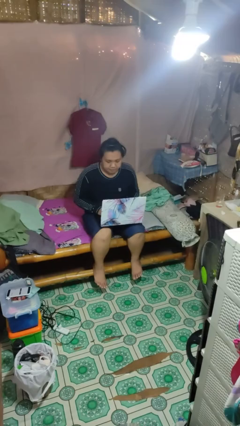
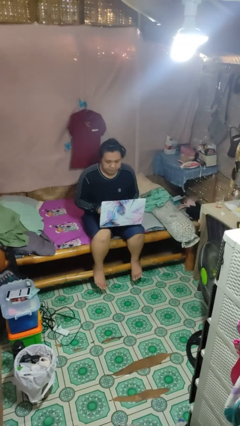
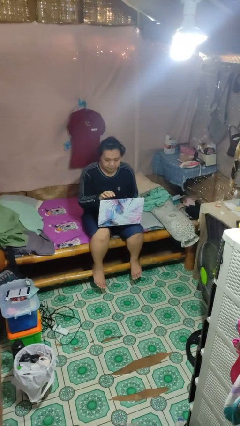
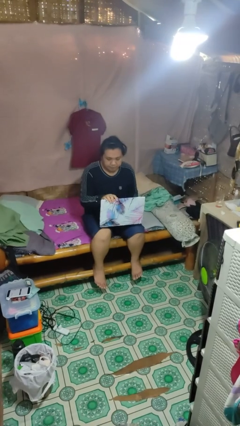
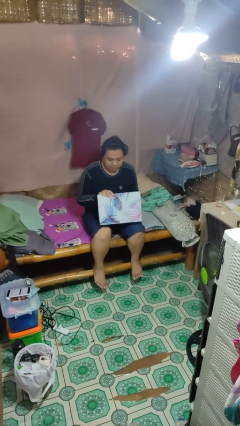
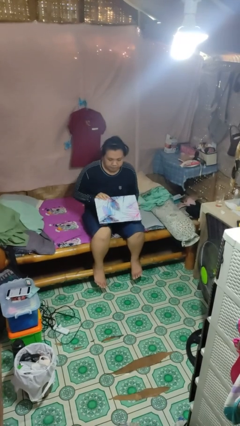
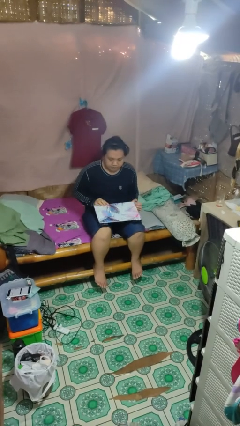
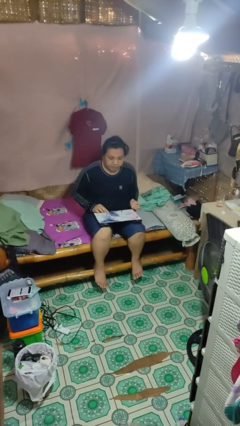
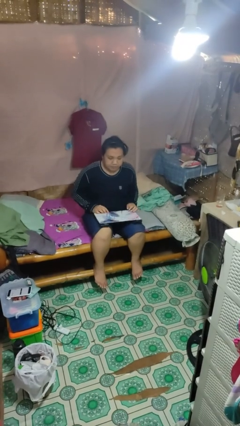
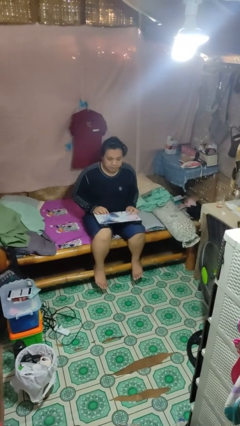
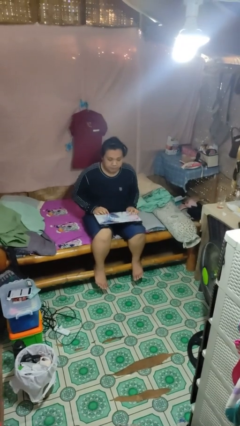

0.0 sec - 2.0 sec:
person closes laptop

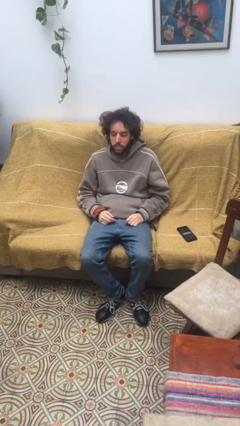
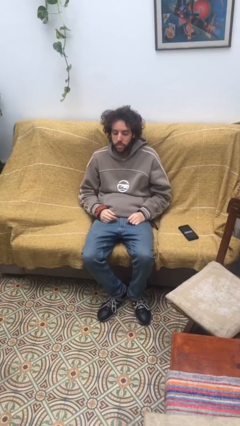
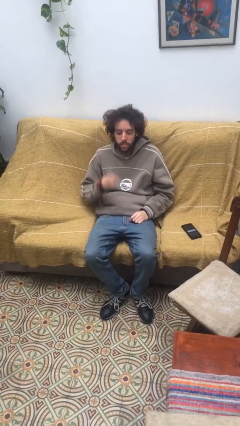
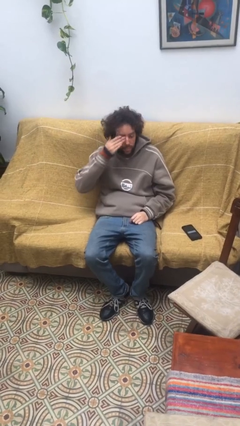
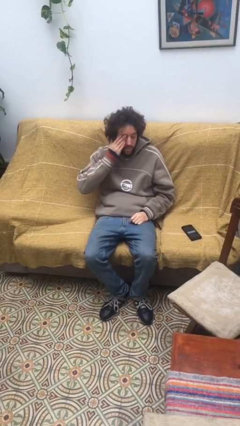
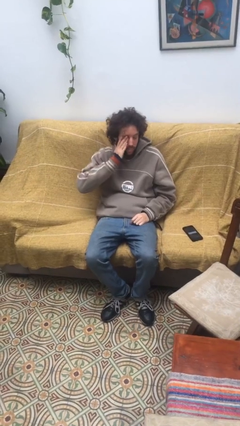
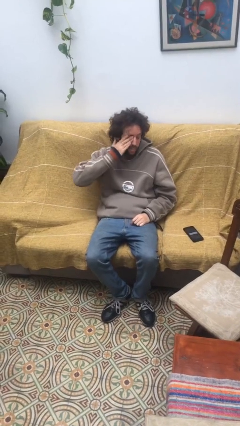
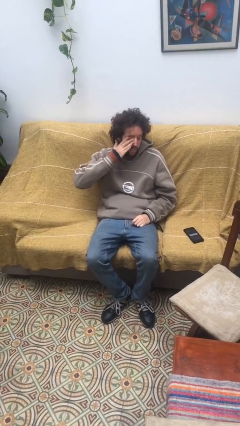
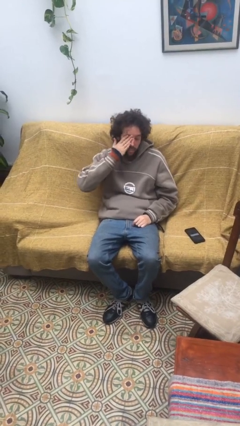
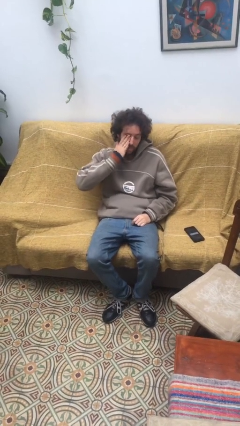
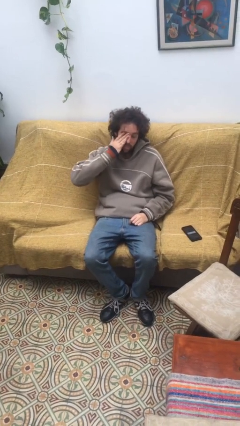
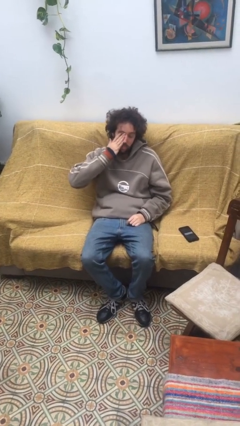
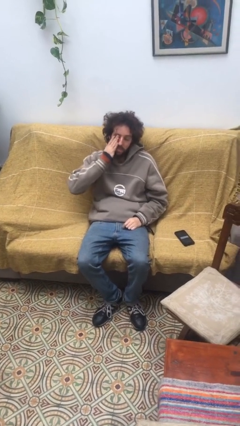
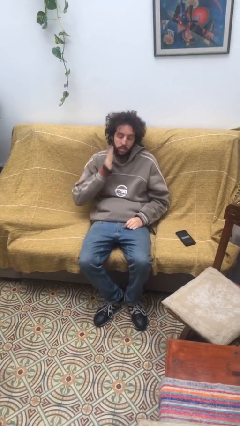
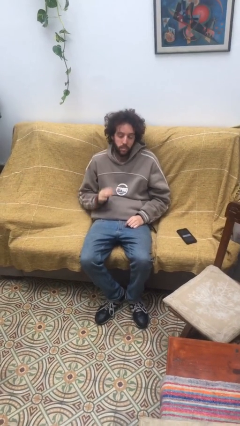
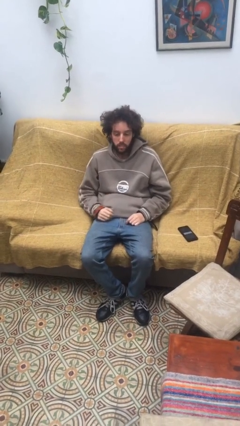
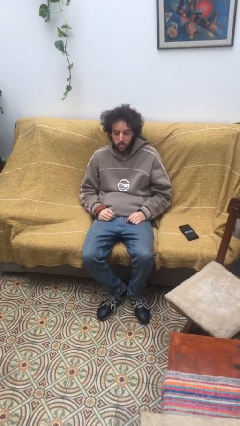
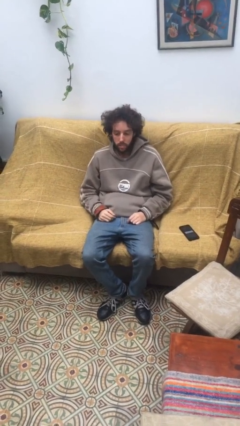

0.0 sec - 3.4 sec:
person rubs eyes

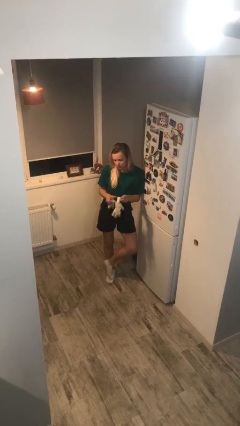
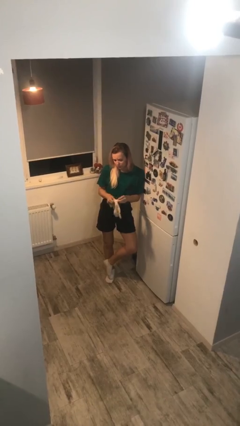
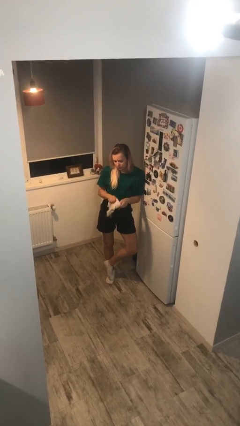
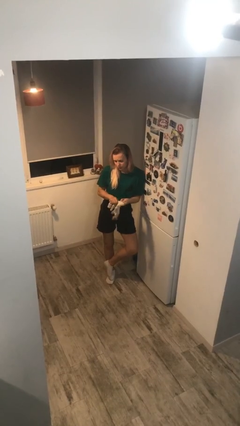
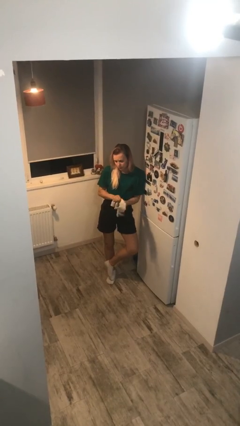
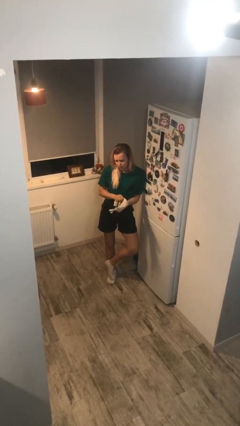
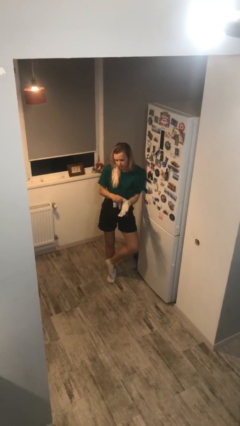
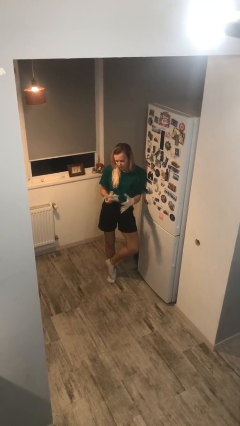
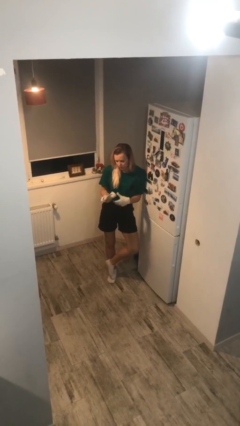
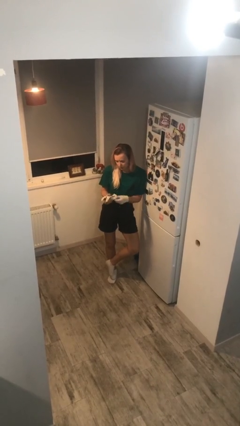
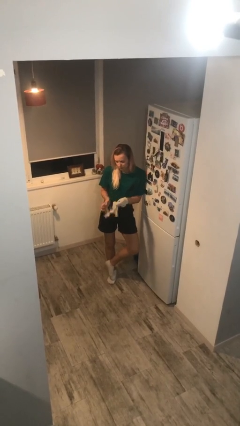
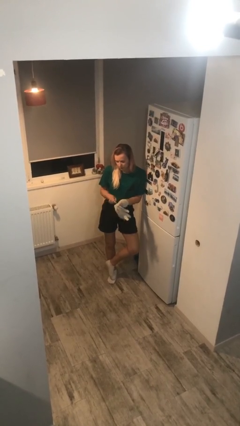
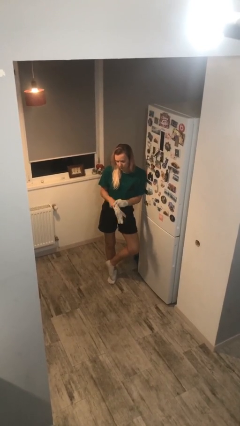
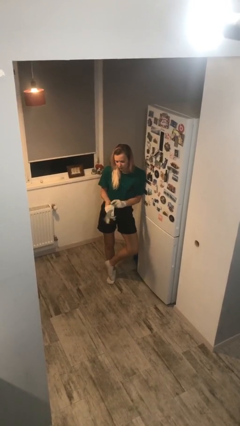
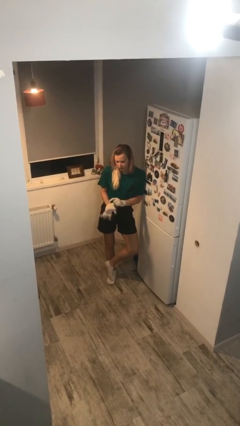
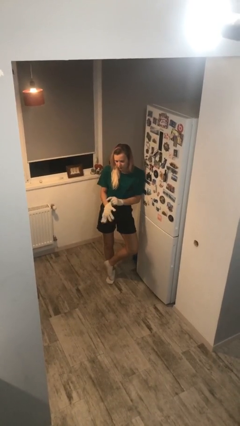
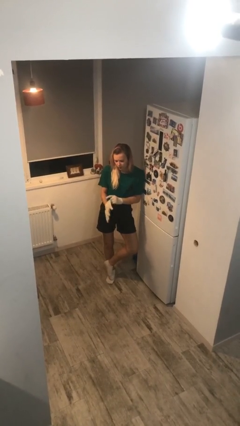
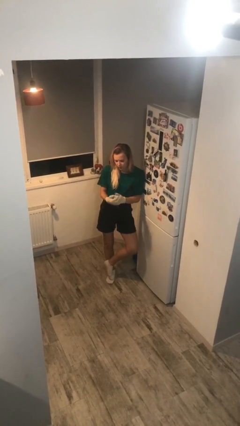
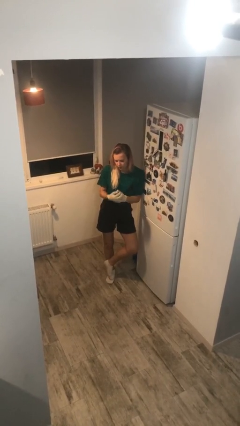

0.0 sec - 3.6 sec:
person puts on gloves

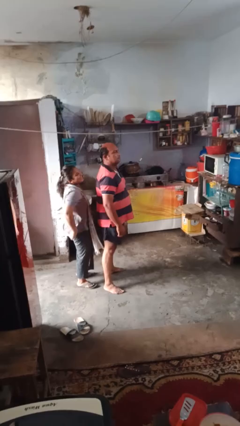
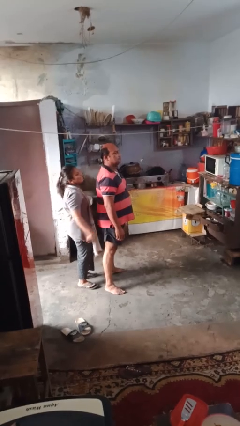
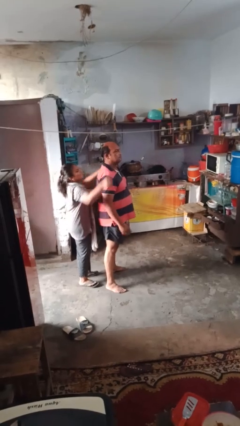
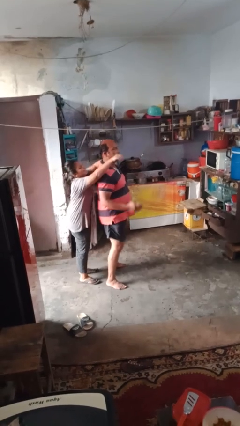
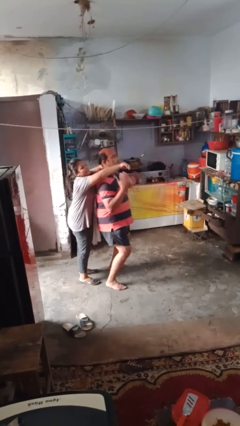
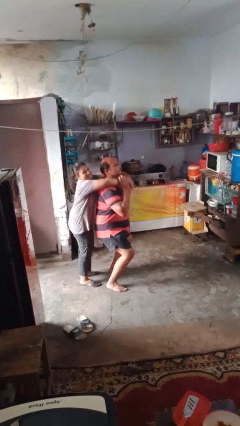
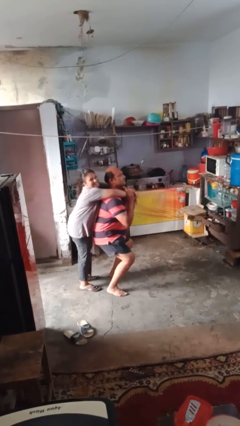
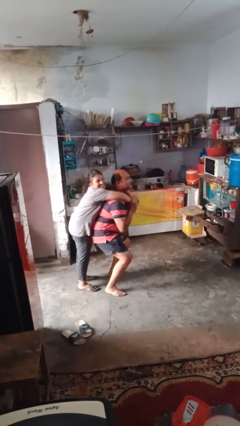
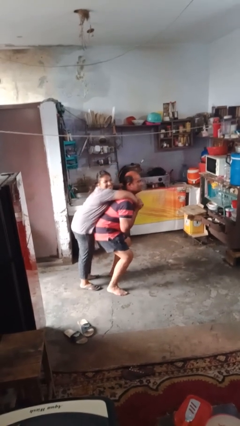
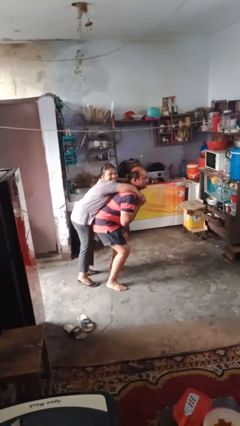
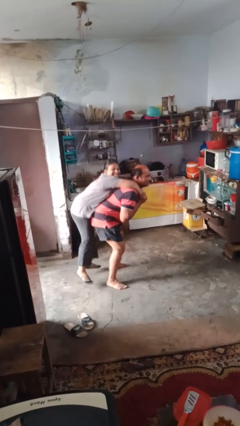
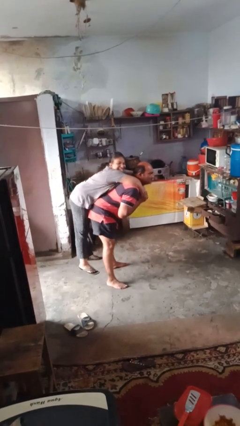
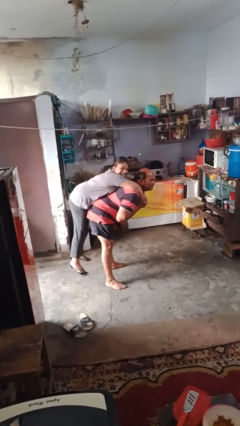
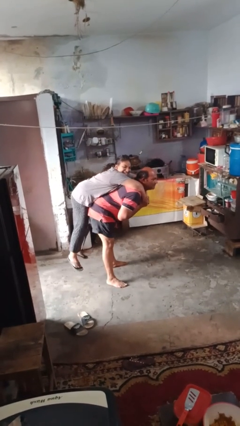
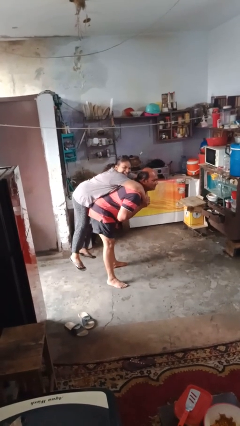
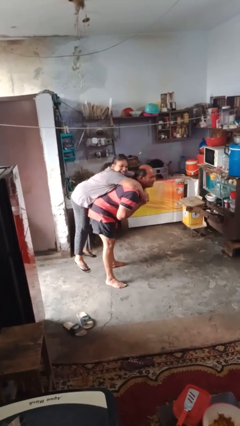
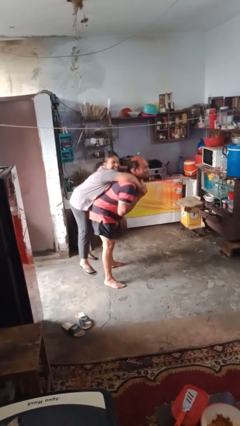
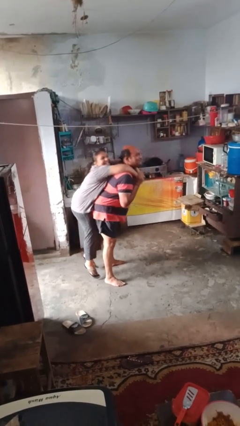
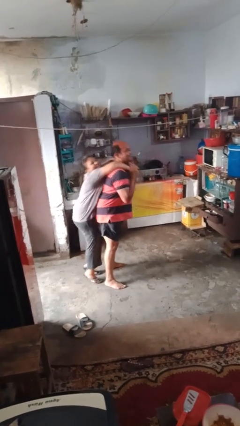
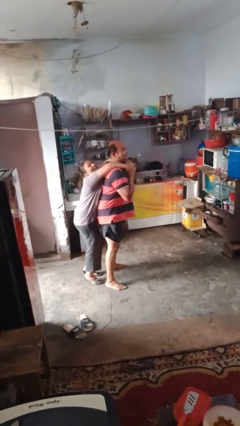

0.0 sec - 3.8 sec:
person carries person on shoulders

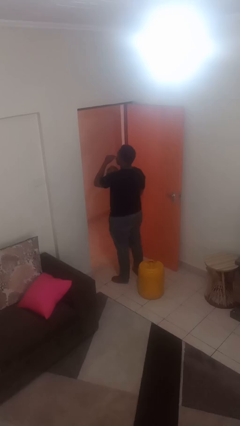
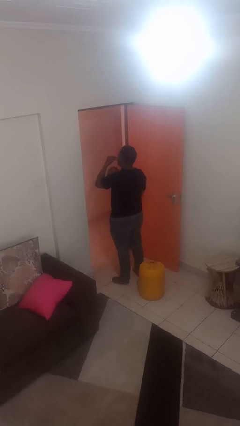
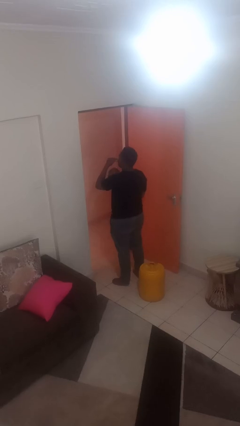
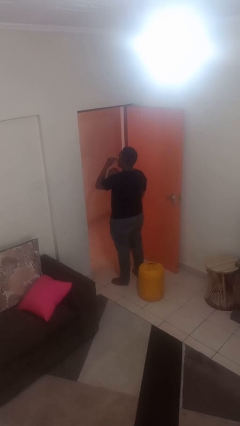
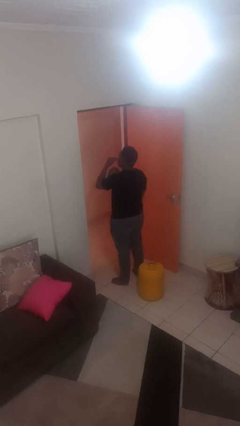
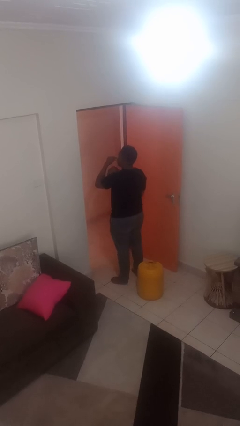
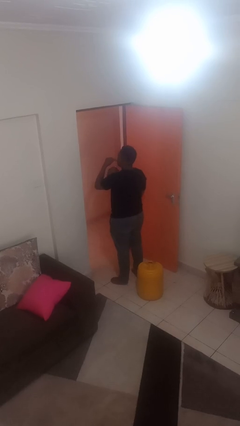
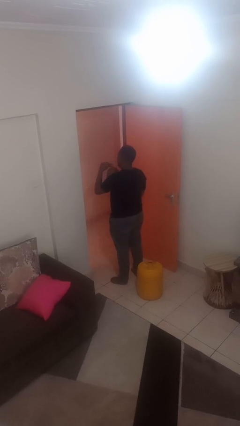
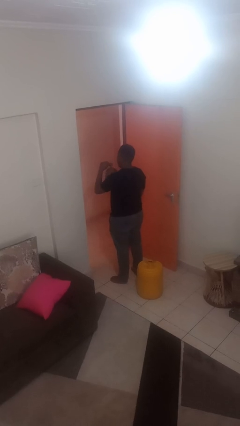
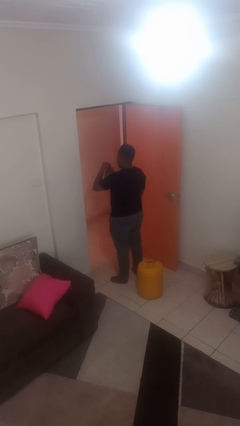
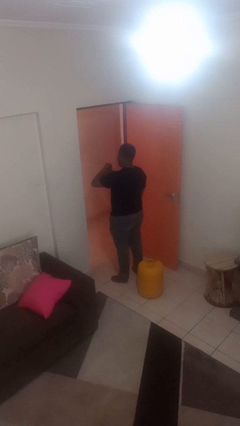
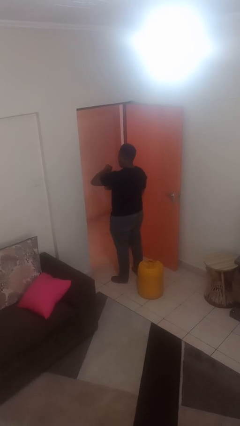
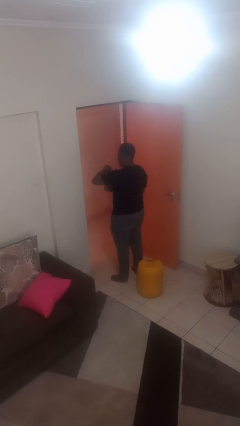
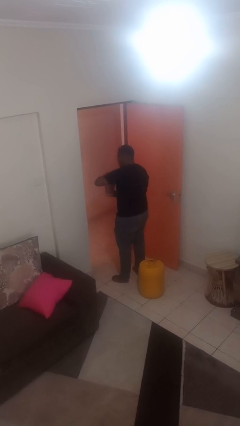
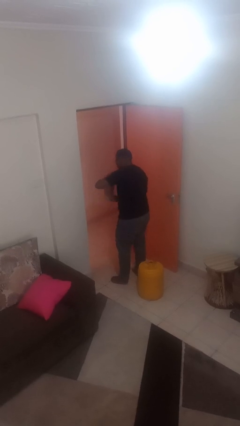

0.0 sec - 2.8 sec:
person eats snack from bag

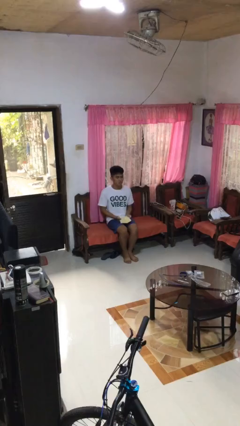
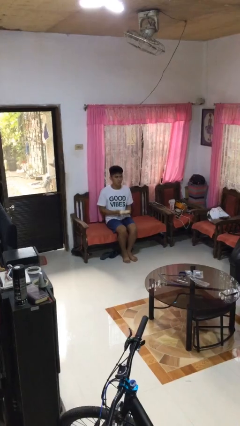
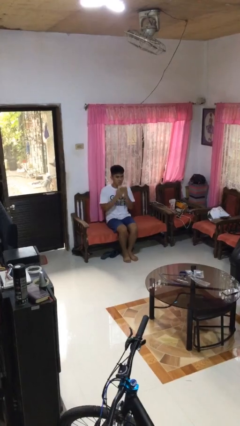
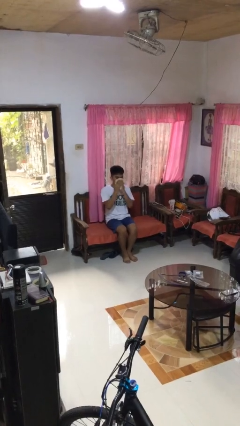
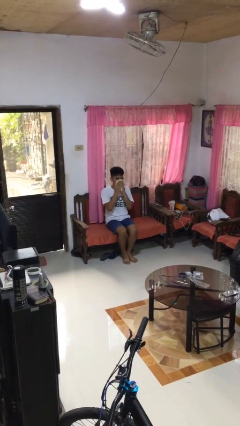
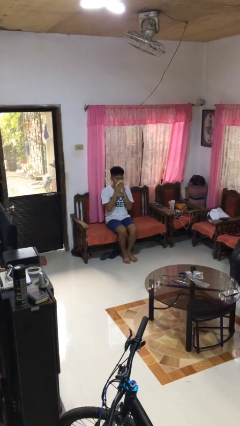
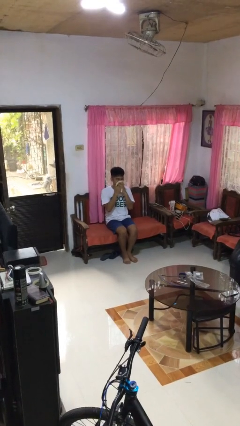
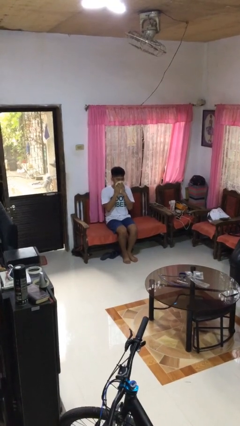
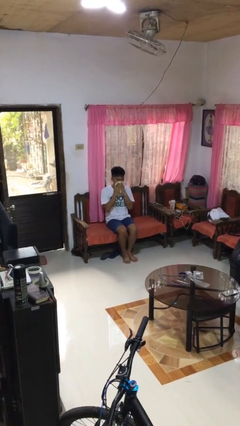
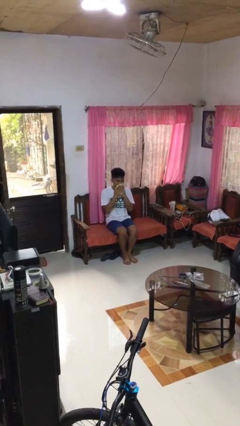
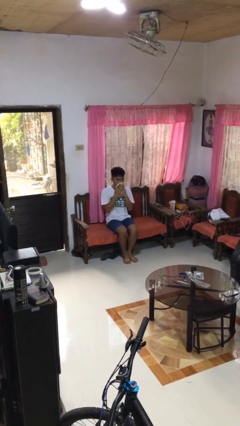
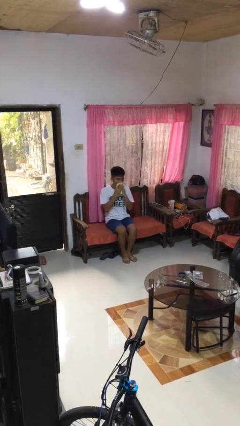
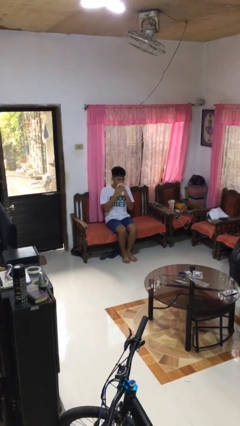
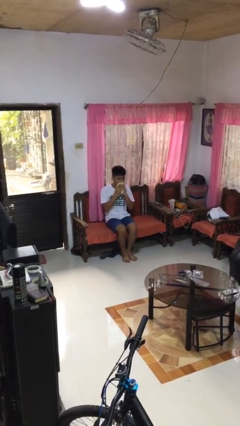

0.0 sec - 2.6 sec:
person wipes mouth with napkin
